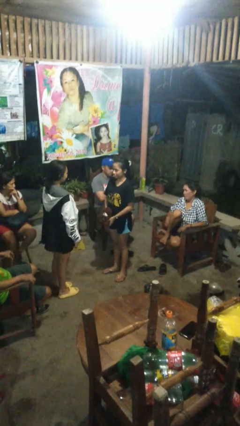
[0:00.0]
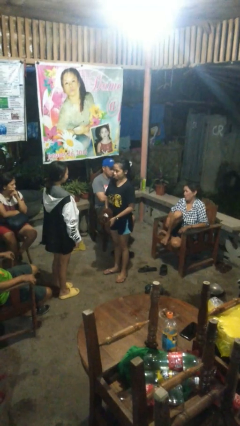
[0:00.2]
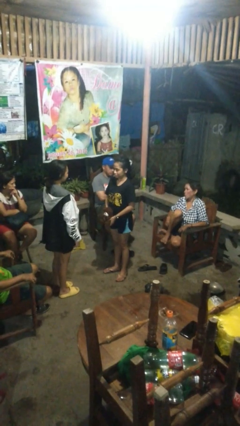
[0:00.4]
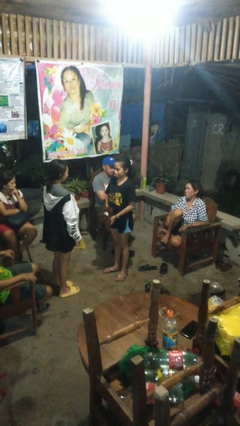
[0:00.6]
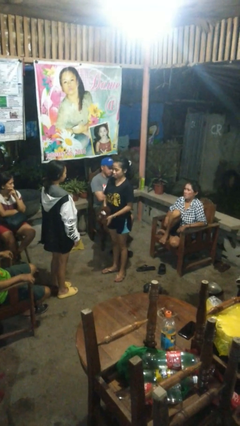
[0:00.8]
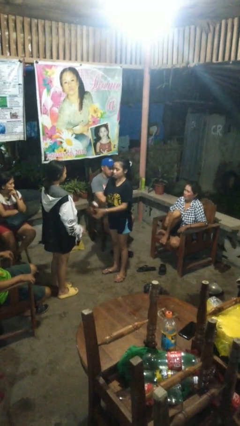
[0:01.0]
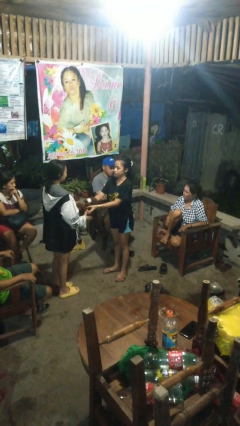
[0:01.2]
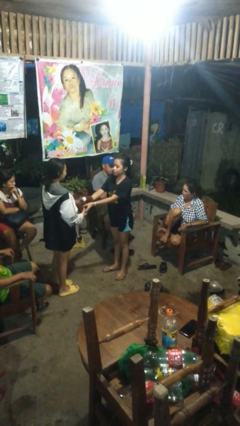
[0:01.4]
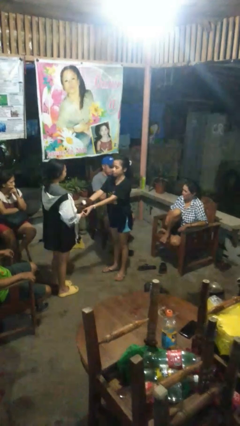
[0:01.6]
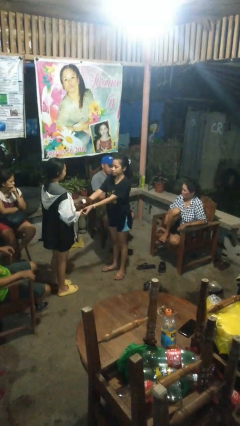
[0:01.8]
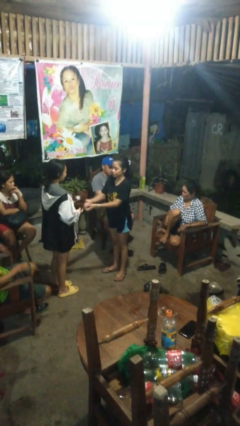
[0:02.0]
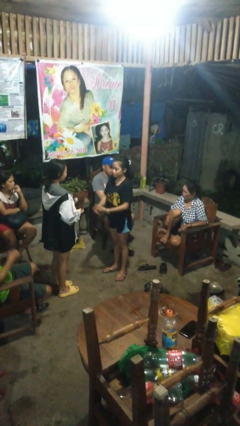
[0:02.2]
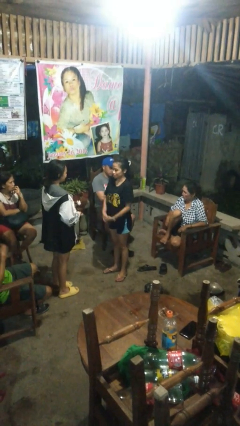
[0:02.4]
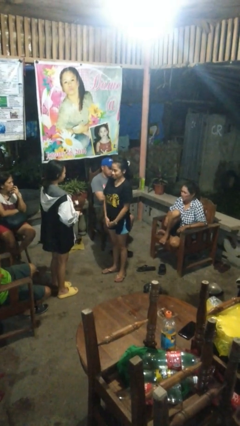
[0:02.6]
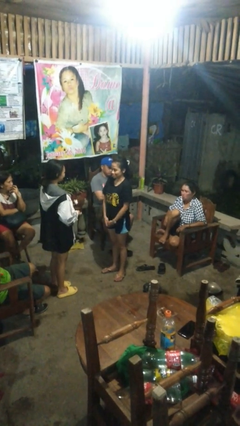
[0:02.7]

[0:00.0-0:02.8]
person transfers object to person

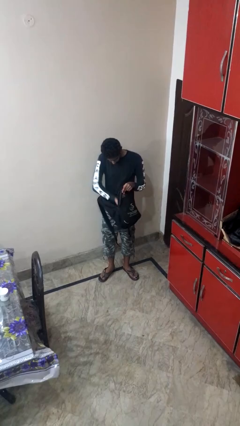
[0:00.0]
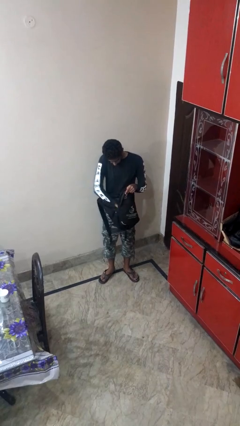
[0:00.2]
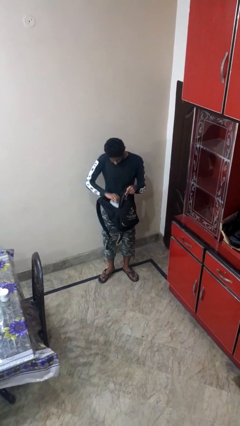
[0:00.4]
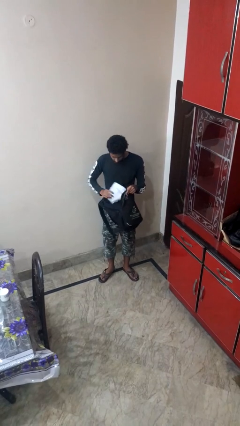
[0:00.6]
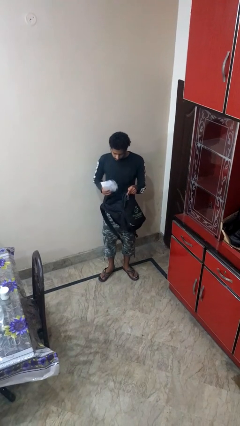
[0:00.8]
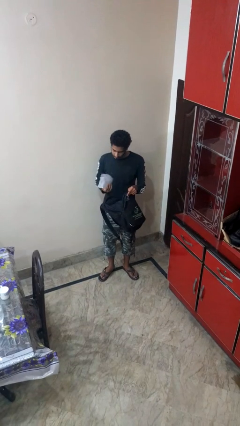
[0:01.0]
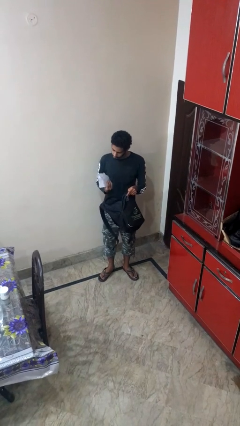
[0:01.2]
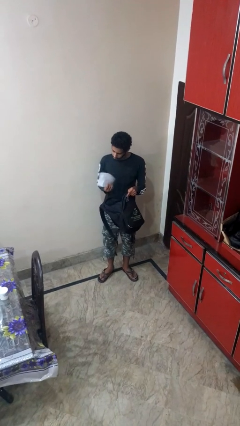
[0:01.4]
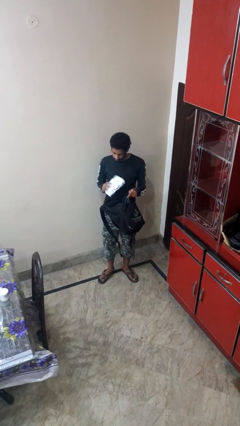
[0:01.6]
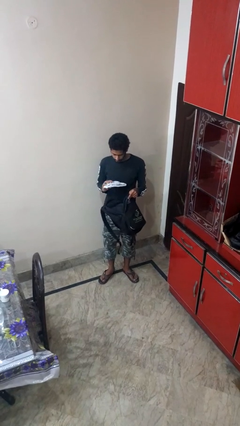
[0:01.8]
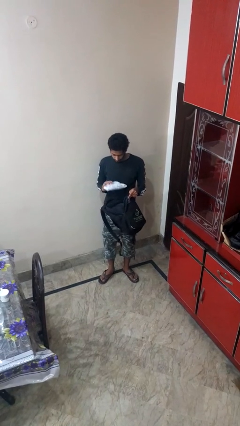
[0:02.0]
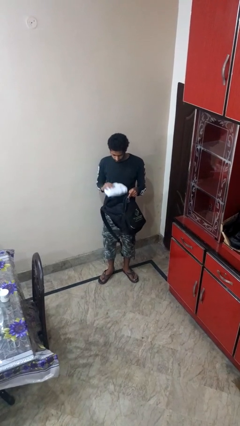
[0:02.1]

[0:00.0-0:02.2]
person takes object from backpack

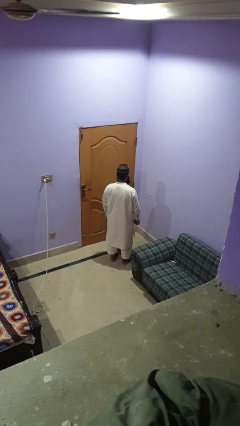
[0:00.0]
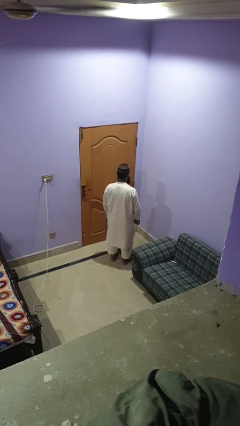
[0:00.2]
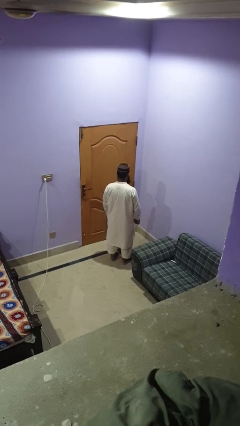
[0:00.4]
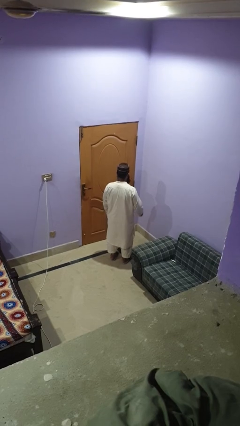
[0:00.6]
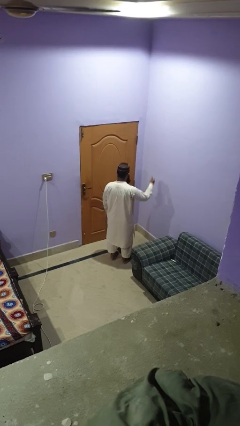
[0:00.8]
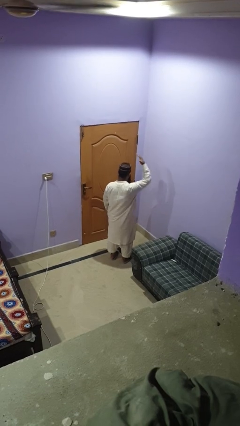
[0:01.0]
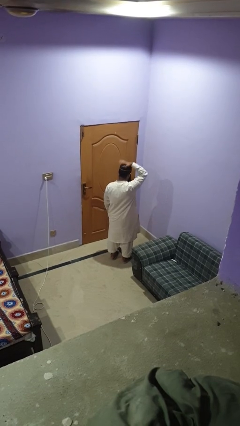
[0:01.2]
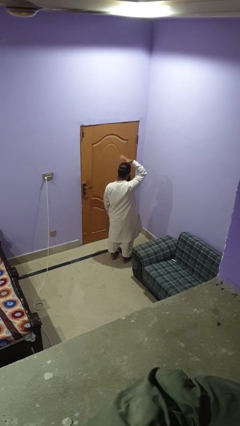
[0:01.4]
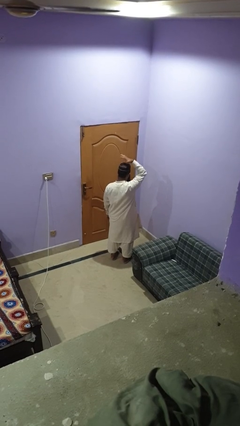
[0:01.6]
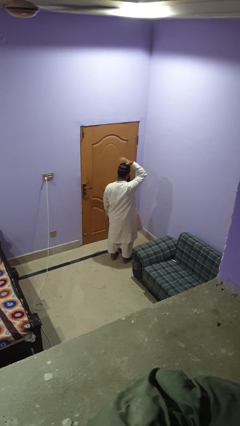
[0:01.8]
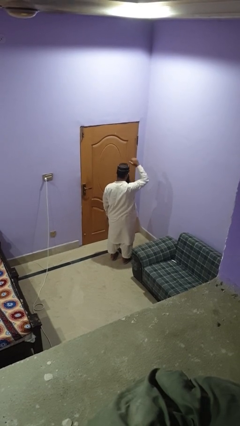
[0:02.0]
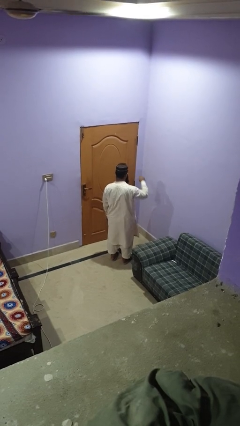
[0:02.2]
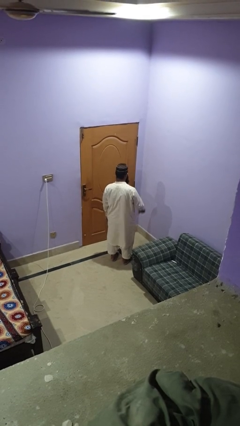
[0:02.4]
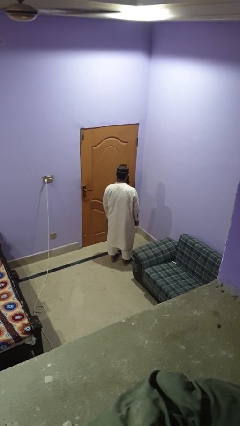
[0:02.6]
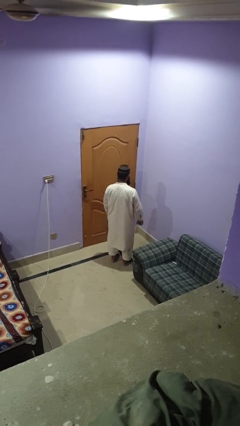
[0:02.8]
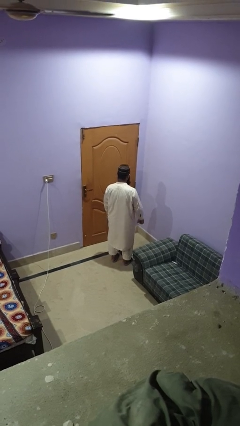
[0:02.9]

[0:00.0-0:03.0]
person pats head

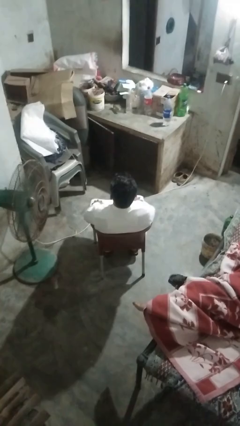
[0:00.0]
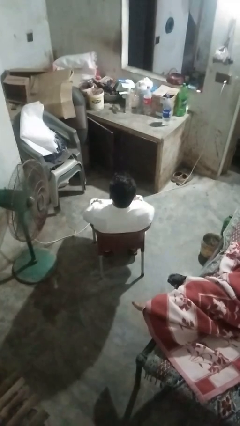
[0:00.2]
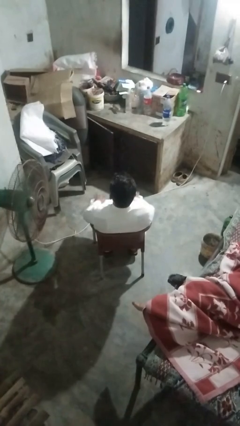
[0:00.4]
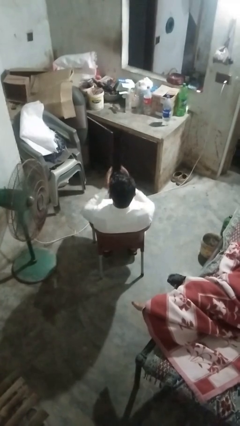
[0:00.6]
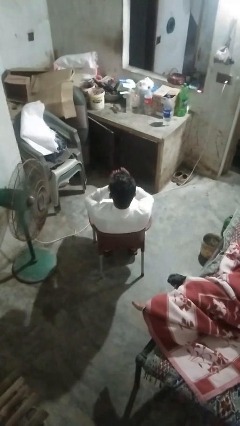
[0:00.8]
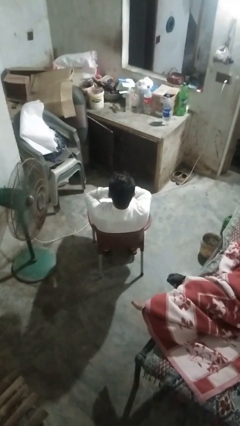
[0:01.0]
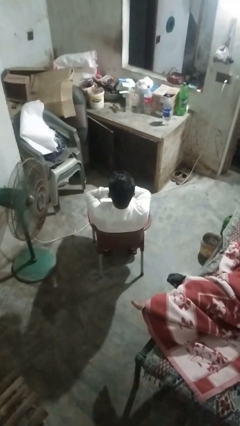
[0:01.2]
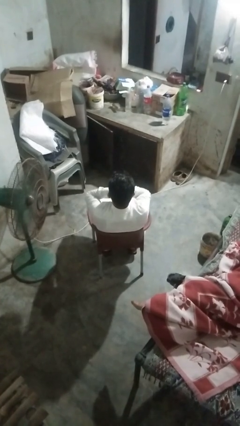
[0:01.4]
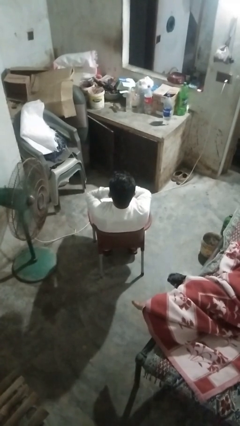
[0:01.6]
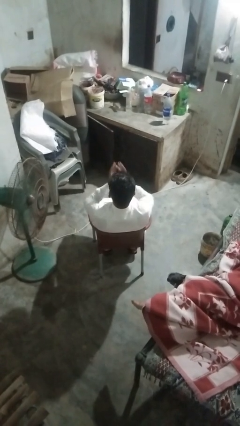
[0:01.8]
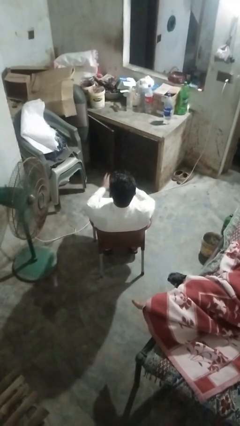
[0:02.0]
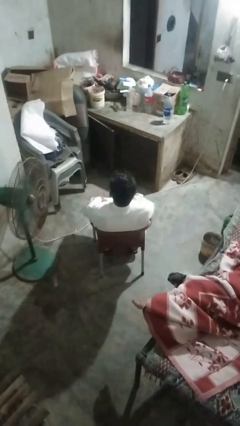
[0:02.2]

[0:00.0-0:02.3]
person yawns

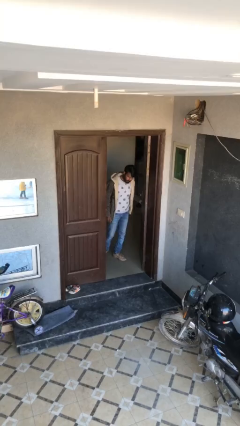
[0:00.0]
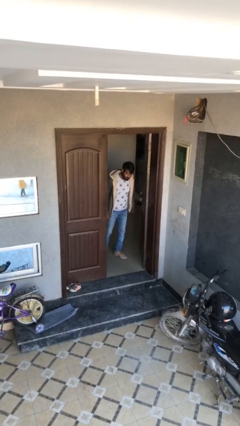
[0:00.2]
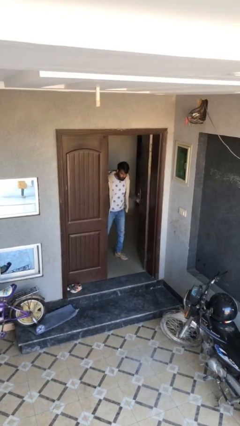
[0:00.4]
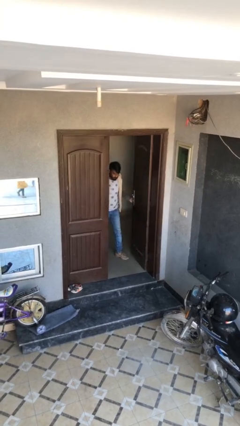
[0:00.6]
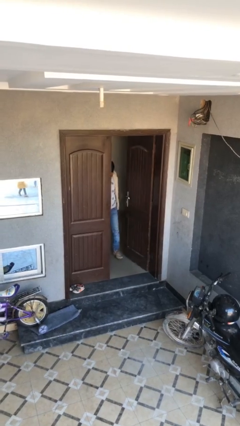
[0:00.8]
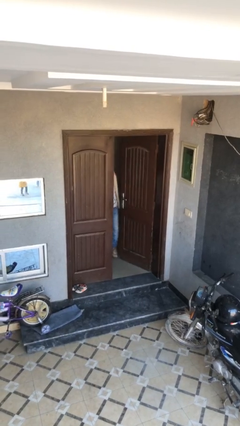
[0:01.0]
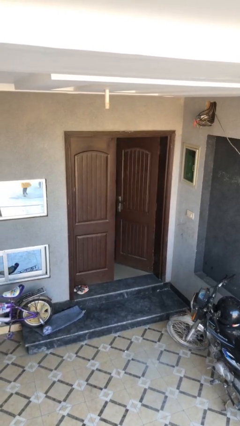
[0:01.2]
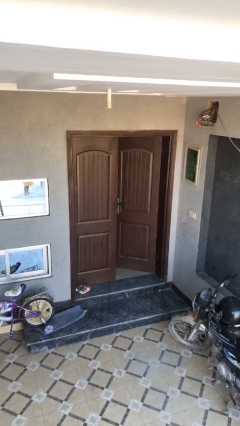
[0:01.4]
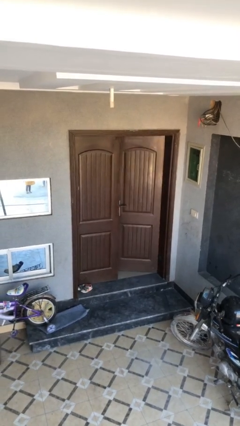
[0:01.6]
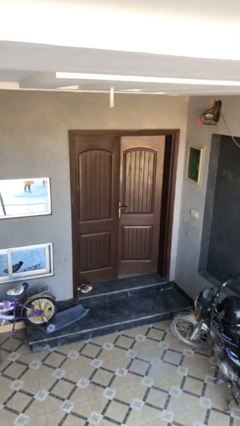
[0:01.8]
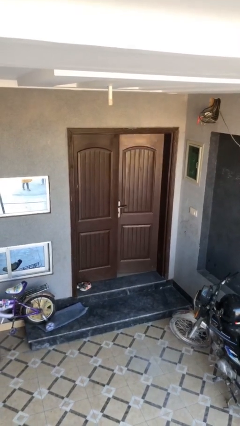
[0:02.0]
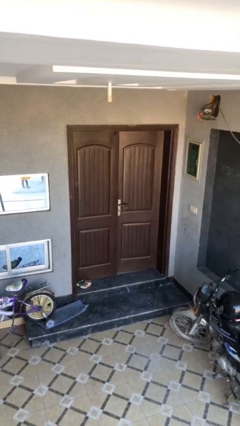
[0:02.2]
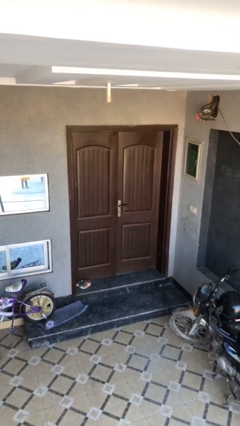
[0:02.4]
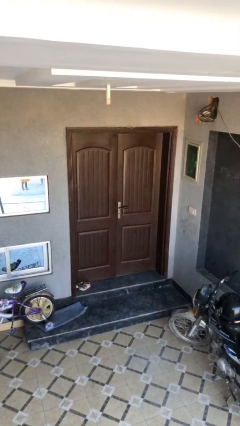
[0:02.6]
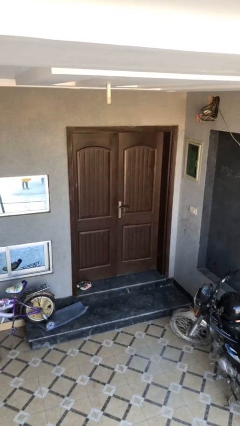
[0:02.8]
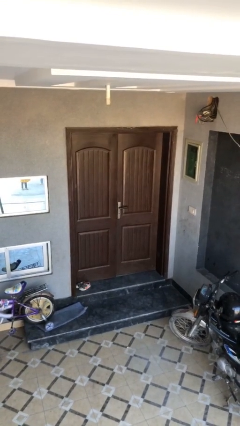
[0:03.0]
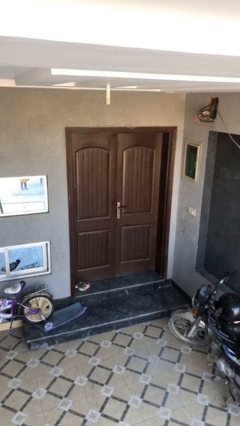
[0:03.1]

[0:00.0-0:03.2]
person closes facility door

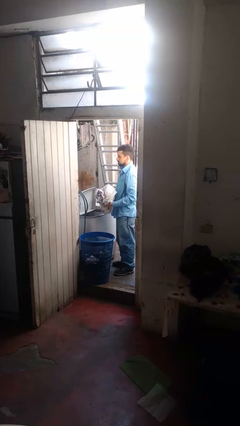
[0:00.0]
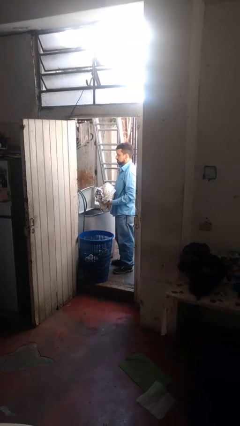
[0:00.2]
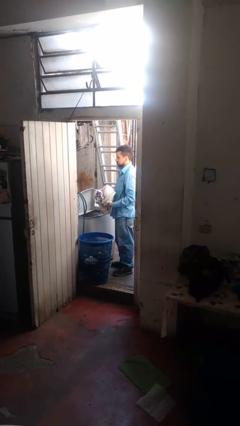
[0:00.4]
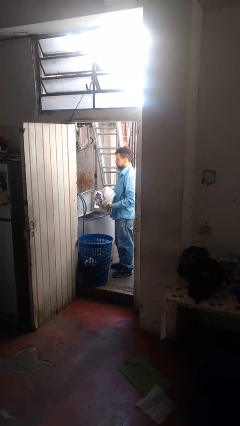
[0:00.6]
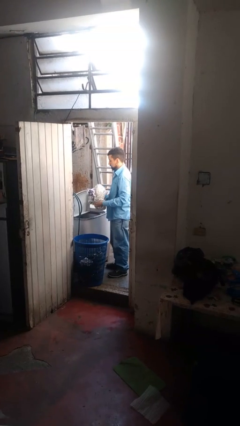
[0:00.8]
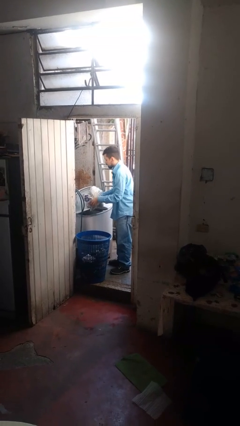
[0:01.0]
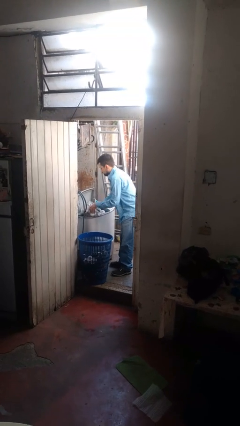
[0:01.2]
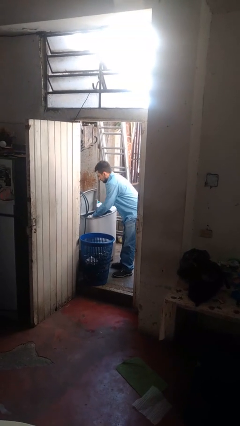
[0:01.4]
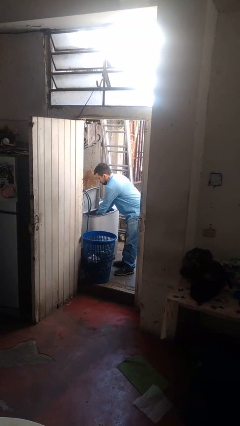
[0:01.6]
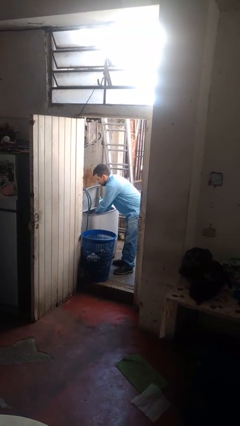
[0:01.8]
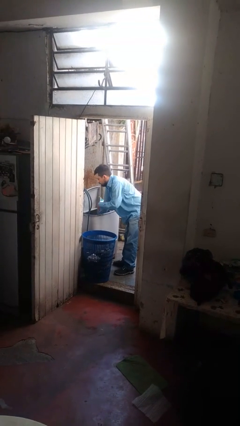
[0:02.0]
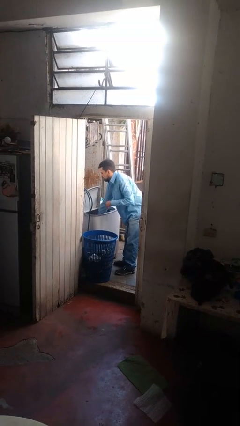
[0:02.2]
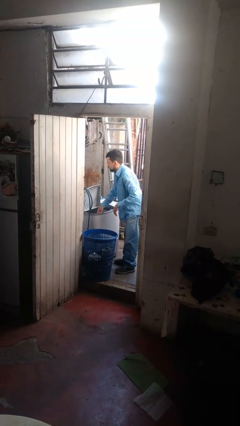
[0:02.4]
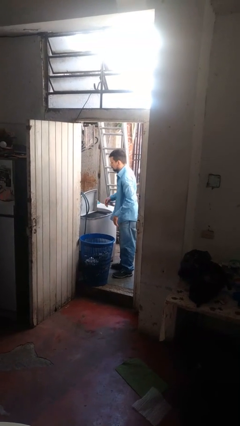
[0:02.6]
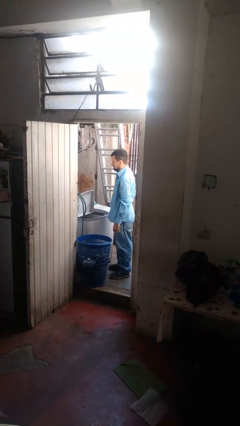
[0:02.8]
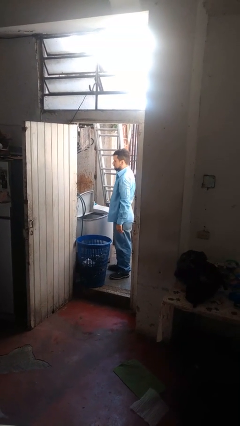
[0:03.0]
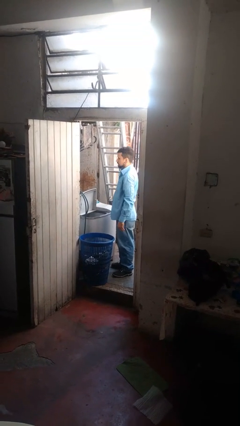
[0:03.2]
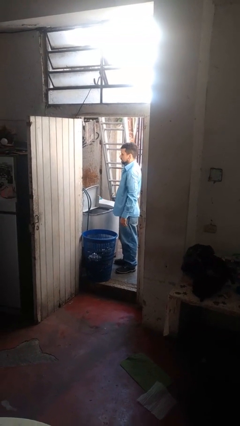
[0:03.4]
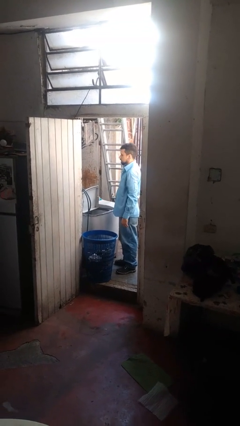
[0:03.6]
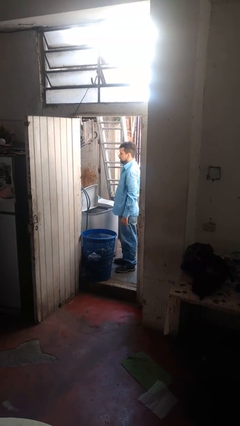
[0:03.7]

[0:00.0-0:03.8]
person loads clotheswasher
